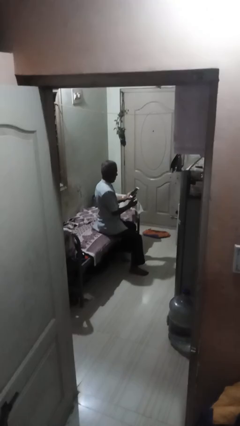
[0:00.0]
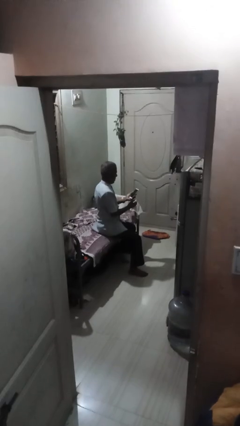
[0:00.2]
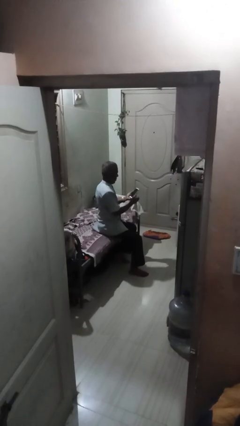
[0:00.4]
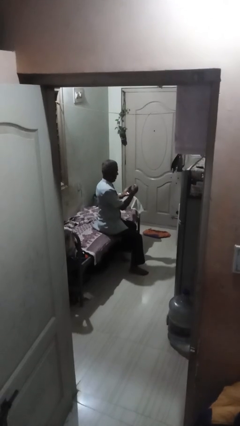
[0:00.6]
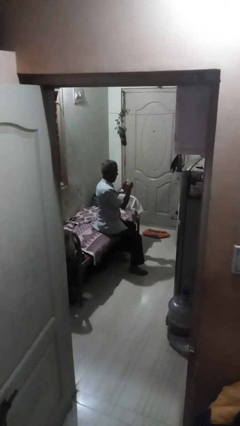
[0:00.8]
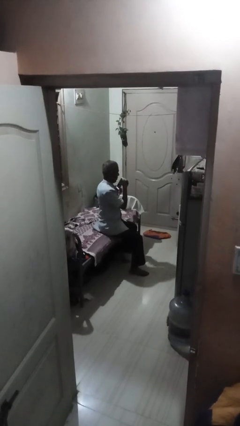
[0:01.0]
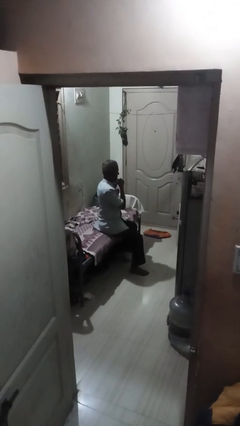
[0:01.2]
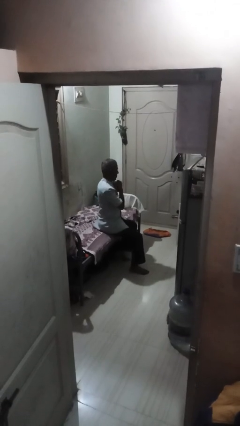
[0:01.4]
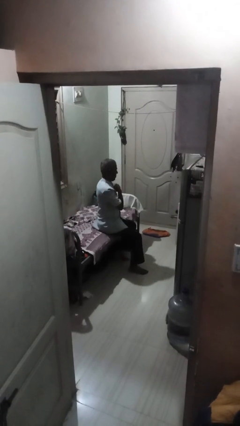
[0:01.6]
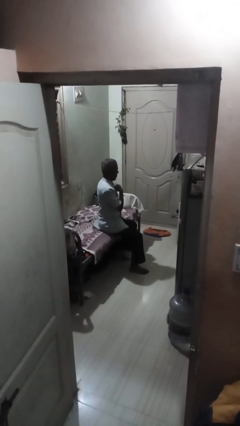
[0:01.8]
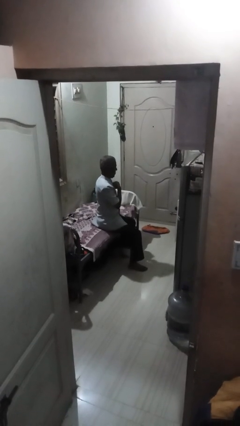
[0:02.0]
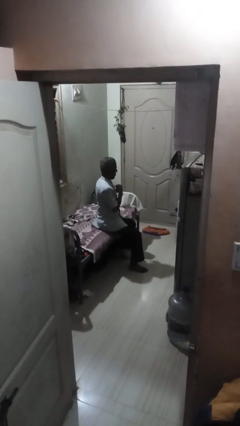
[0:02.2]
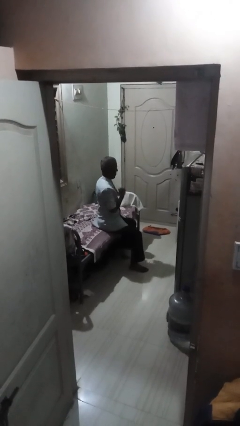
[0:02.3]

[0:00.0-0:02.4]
person puts phone into pocket

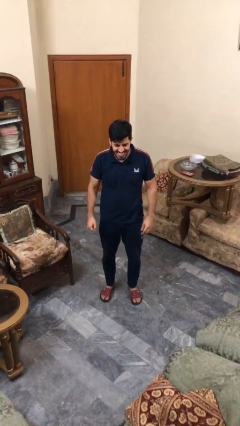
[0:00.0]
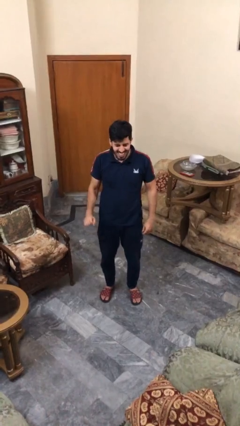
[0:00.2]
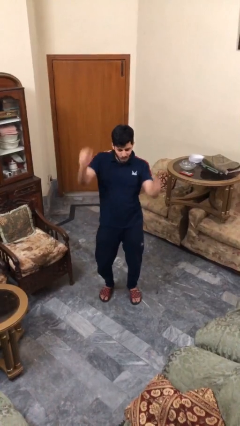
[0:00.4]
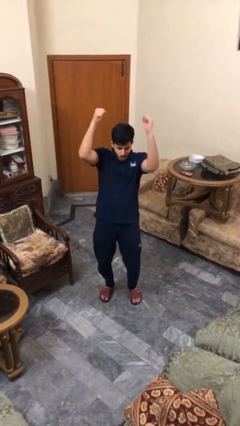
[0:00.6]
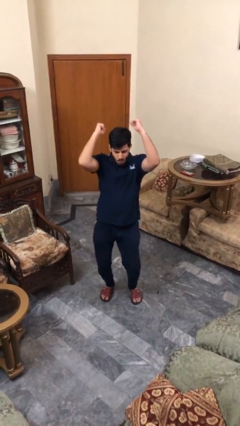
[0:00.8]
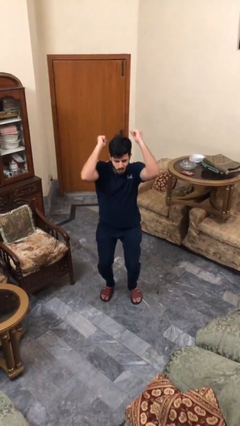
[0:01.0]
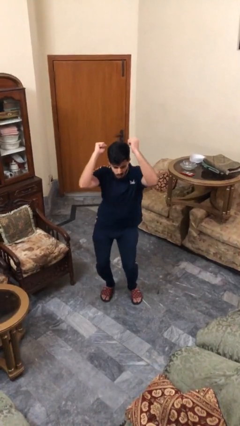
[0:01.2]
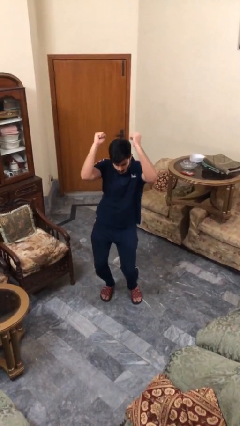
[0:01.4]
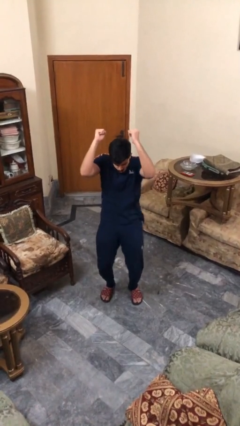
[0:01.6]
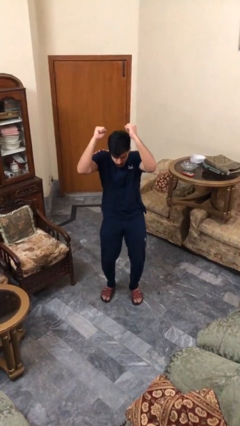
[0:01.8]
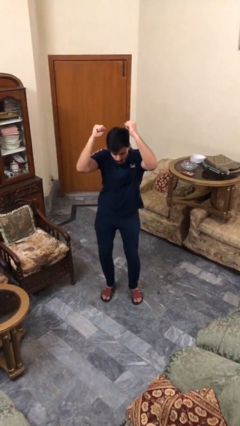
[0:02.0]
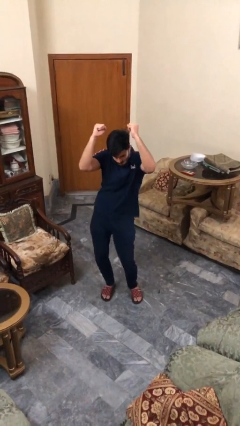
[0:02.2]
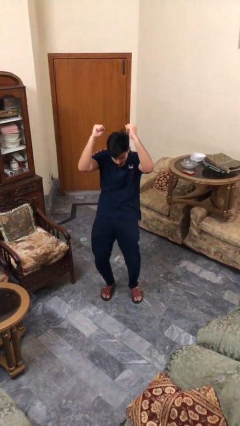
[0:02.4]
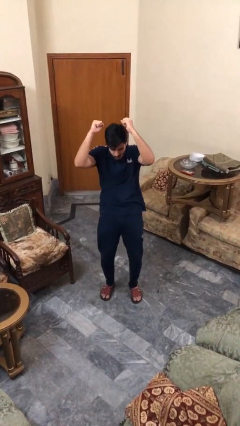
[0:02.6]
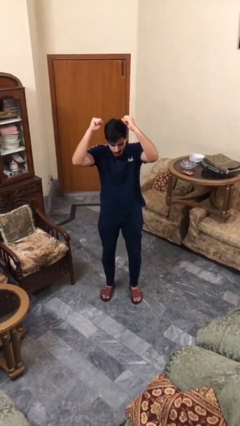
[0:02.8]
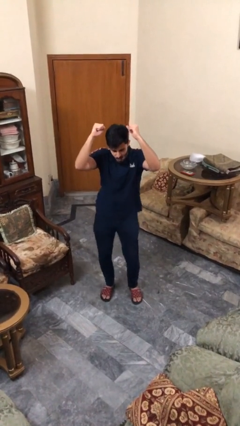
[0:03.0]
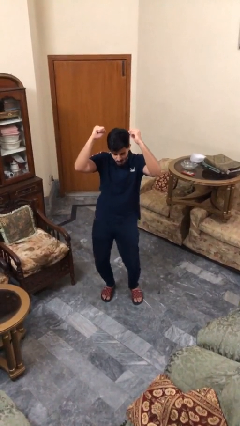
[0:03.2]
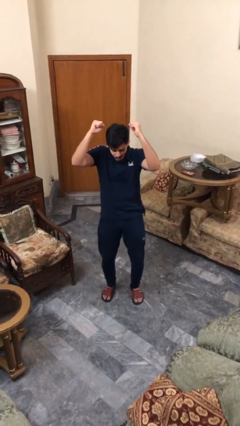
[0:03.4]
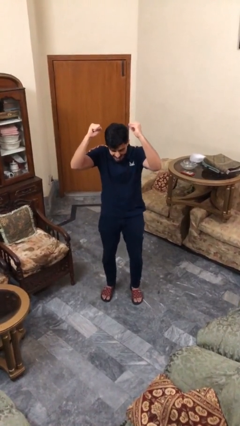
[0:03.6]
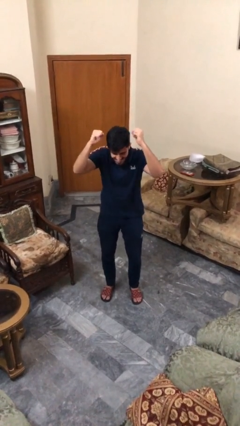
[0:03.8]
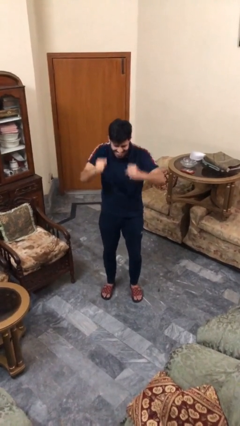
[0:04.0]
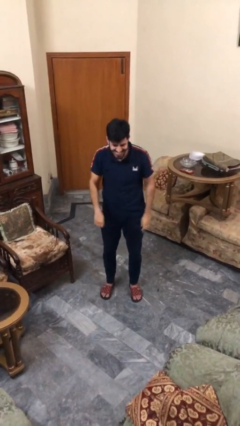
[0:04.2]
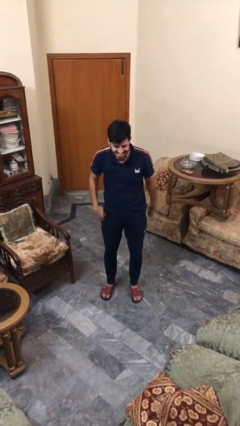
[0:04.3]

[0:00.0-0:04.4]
person dances in place

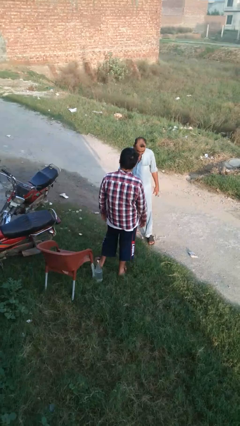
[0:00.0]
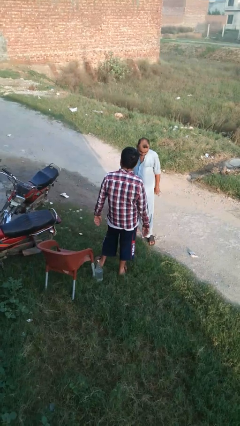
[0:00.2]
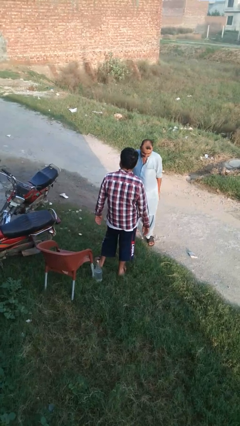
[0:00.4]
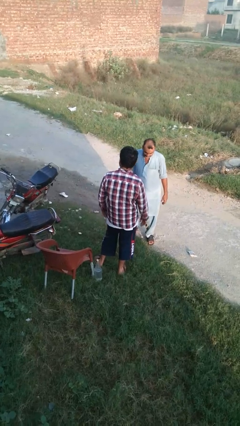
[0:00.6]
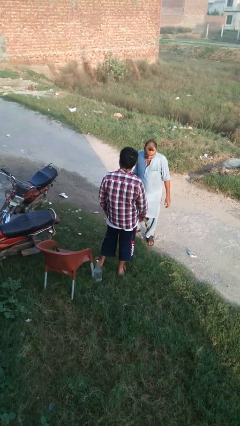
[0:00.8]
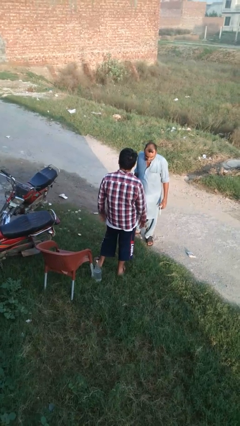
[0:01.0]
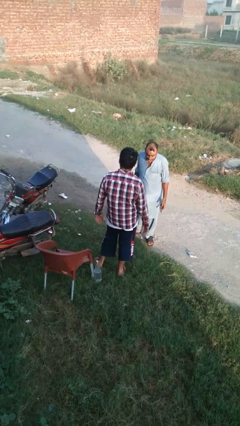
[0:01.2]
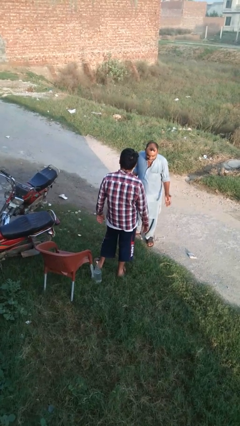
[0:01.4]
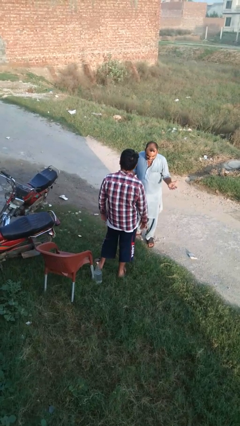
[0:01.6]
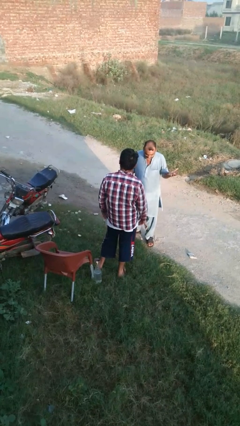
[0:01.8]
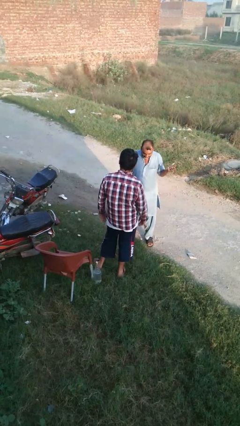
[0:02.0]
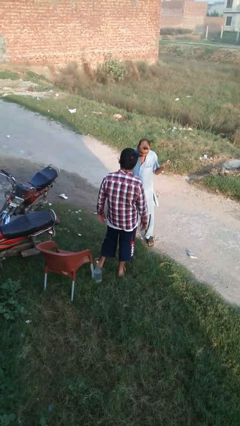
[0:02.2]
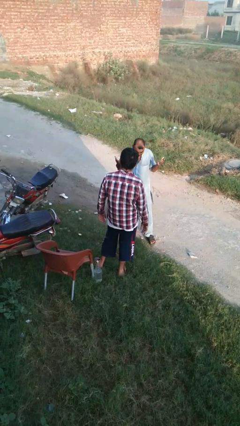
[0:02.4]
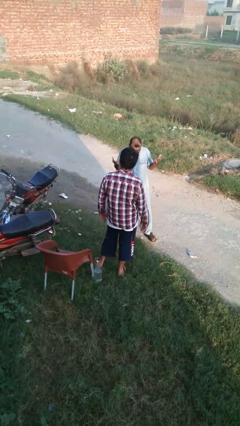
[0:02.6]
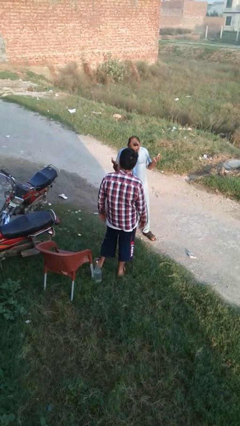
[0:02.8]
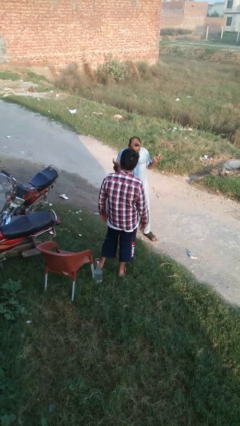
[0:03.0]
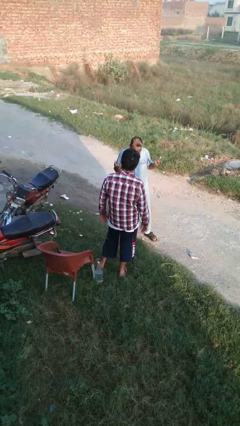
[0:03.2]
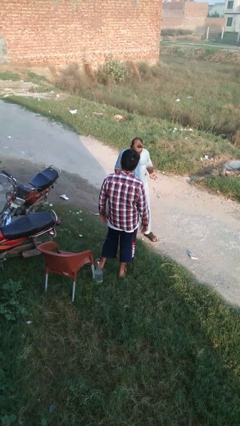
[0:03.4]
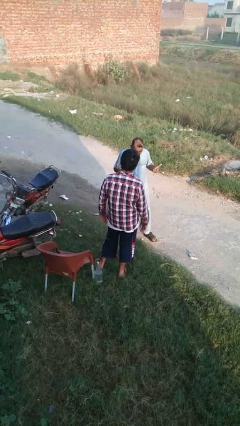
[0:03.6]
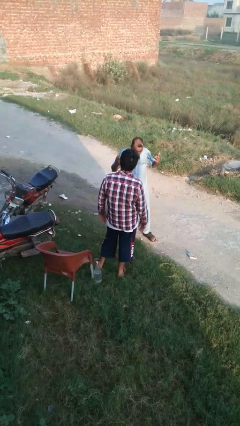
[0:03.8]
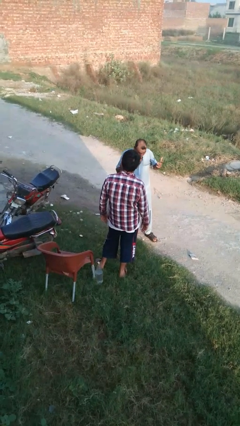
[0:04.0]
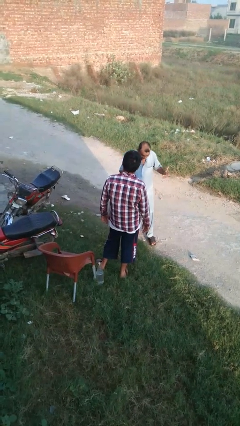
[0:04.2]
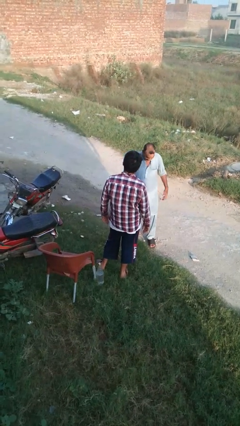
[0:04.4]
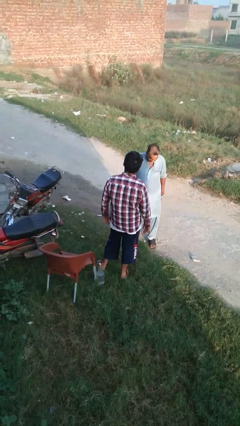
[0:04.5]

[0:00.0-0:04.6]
person laughs with person

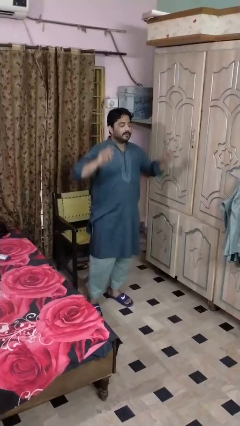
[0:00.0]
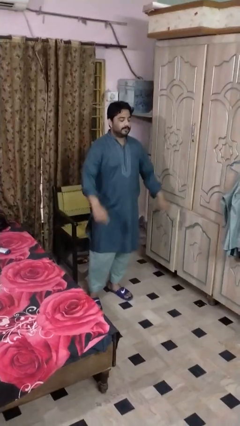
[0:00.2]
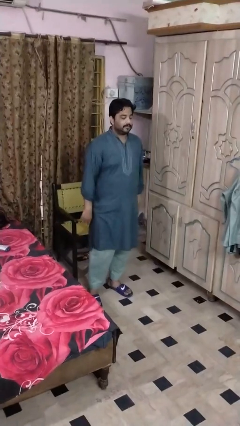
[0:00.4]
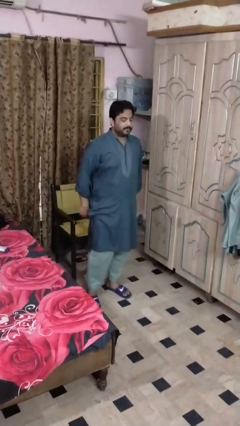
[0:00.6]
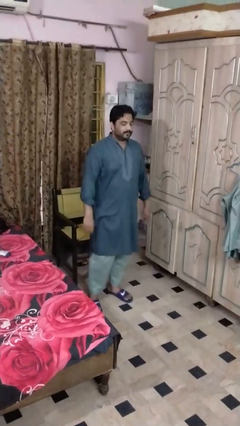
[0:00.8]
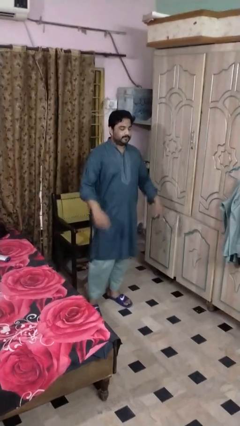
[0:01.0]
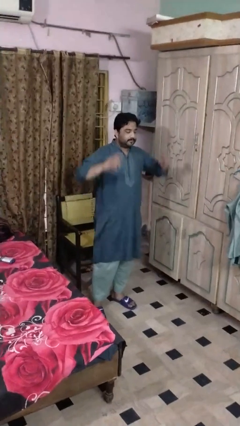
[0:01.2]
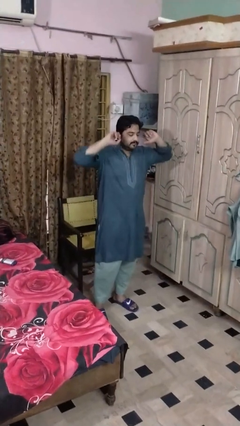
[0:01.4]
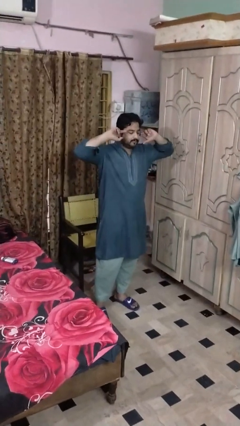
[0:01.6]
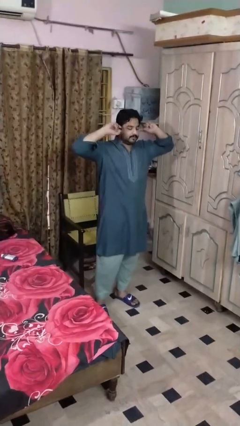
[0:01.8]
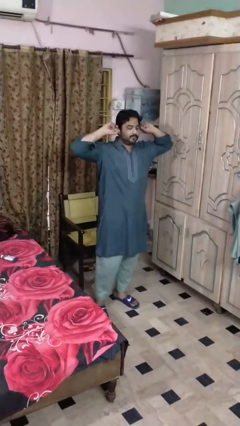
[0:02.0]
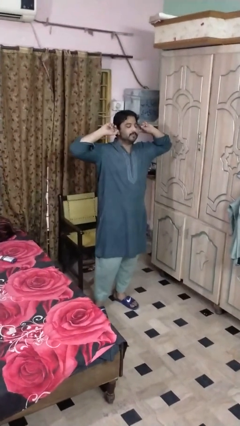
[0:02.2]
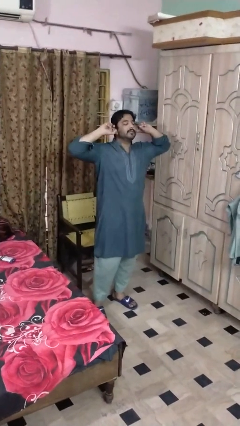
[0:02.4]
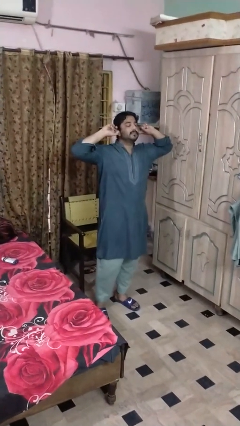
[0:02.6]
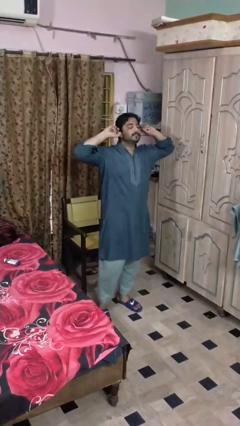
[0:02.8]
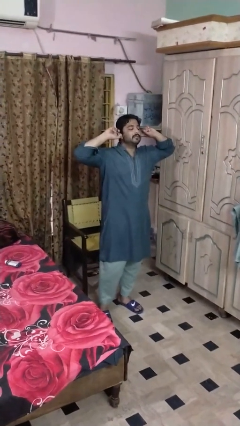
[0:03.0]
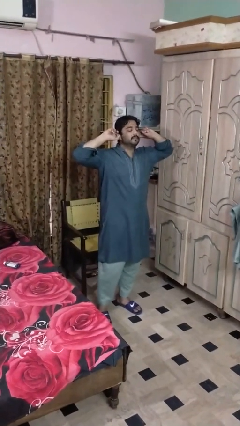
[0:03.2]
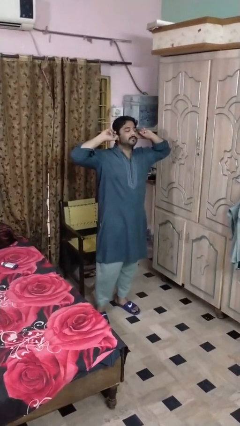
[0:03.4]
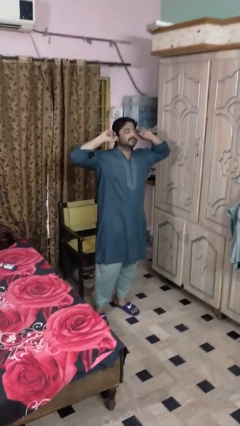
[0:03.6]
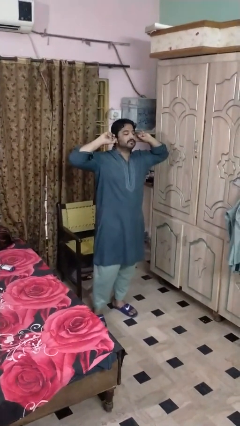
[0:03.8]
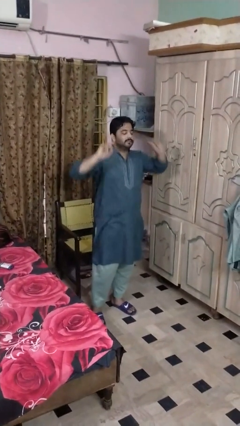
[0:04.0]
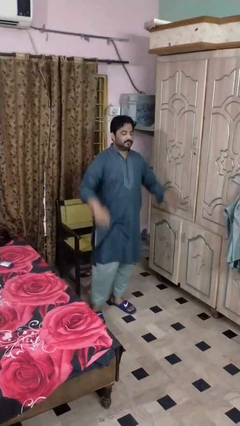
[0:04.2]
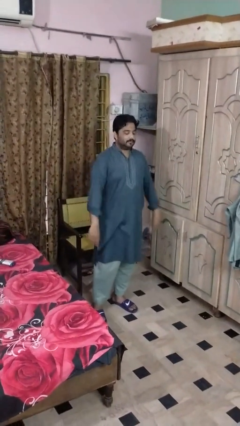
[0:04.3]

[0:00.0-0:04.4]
person puts fingers in ear

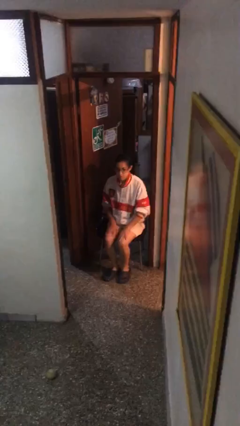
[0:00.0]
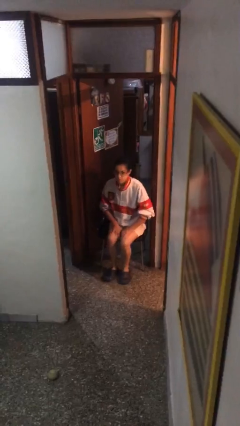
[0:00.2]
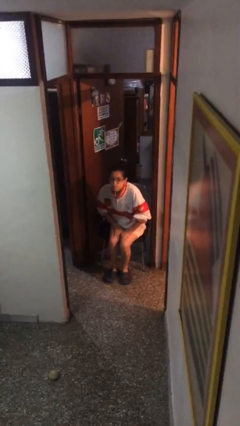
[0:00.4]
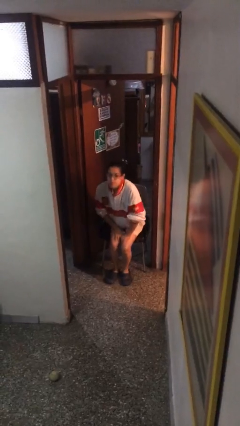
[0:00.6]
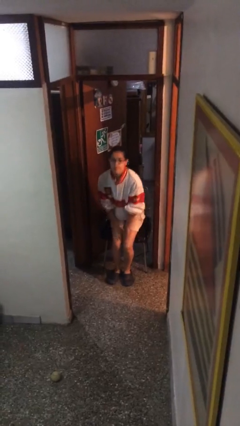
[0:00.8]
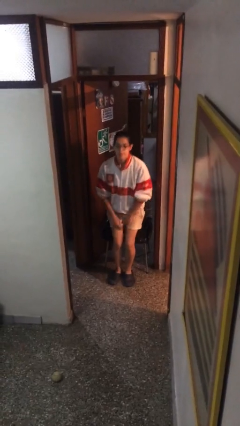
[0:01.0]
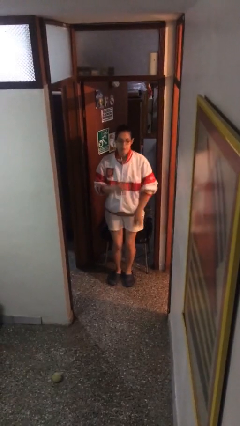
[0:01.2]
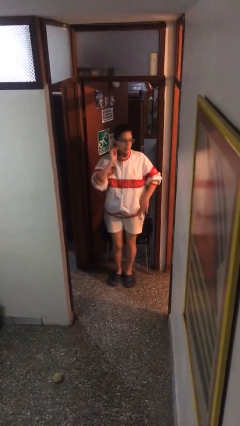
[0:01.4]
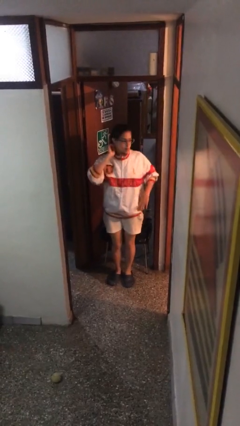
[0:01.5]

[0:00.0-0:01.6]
person stands up

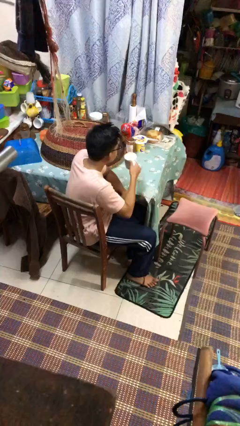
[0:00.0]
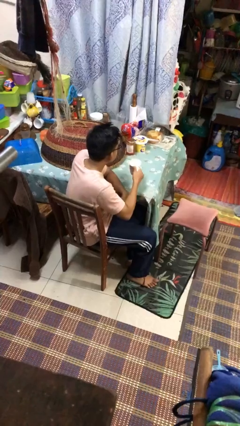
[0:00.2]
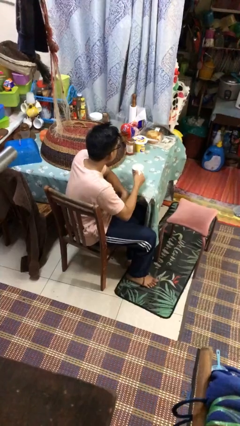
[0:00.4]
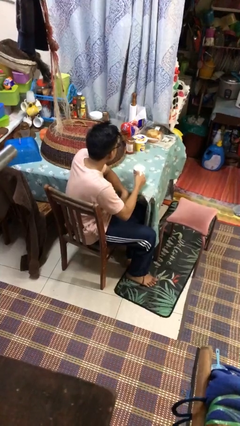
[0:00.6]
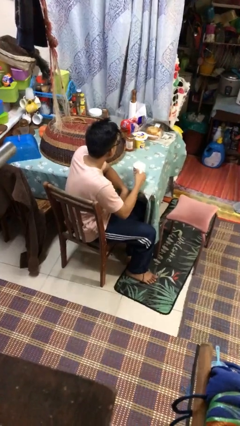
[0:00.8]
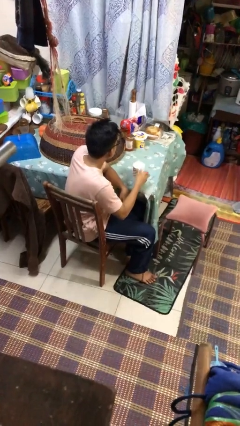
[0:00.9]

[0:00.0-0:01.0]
person puts down object on table
